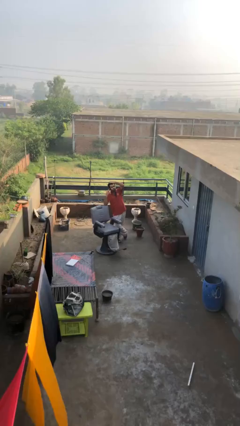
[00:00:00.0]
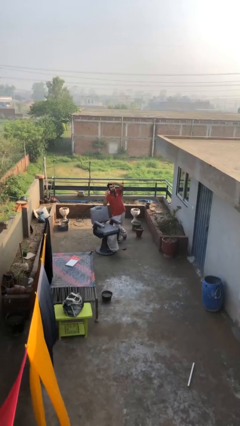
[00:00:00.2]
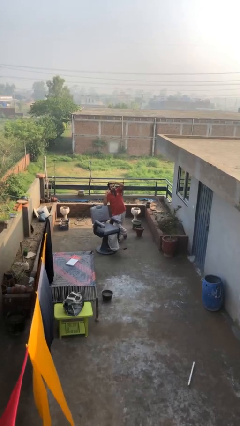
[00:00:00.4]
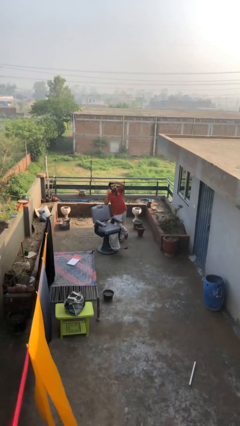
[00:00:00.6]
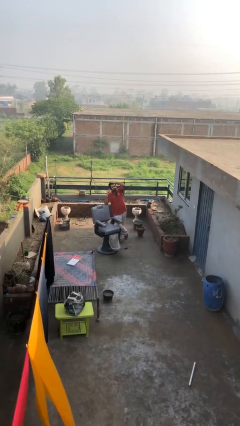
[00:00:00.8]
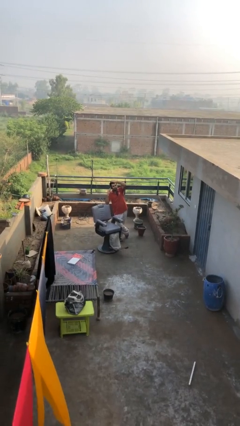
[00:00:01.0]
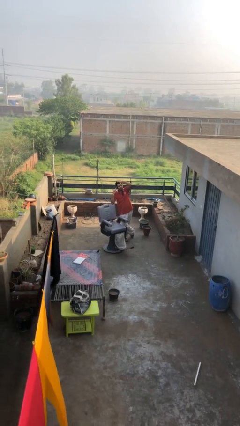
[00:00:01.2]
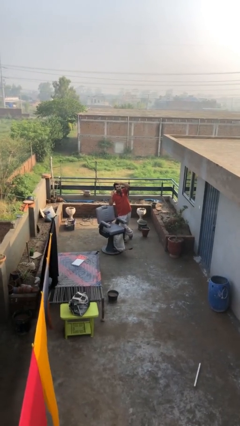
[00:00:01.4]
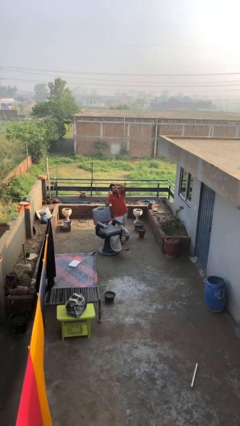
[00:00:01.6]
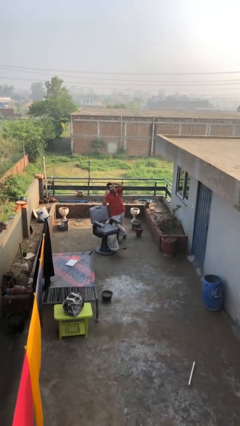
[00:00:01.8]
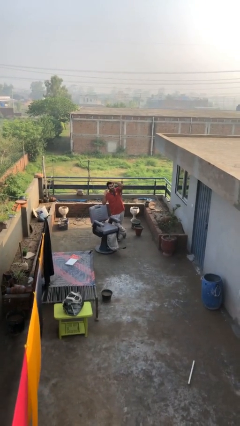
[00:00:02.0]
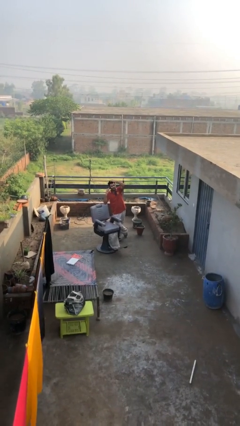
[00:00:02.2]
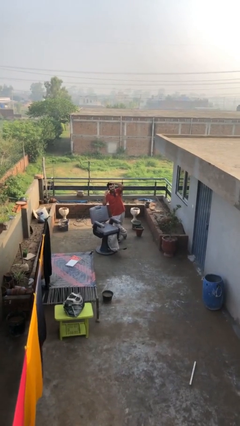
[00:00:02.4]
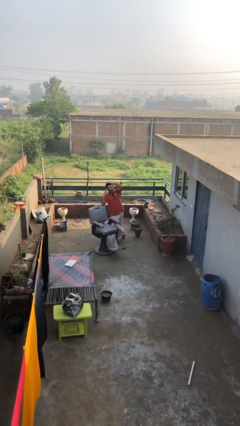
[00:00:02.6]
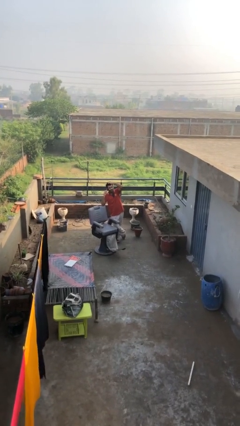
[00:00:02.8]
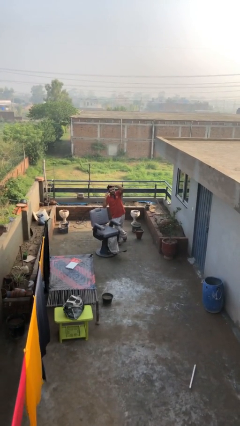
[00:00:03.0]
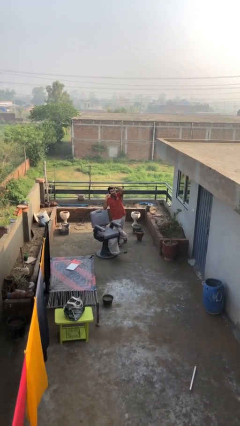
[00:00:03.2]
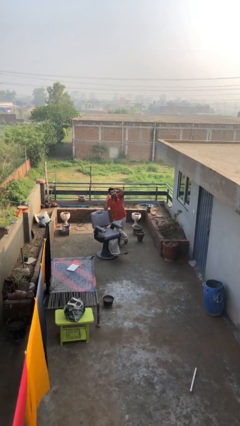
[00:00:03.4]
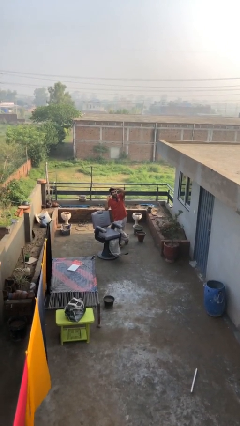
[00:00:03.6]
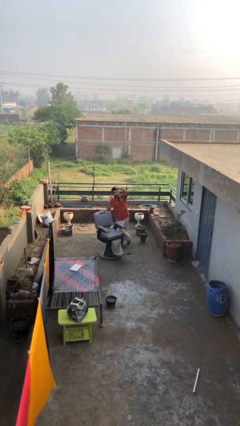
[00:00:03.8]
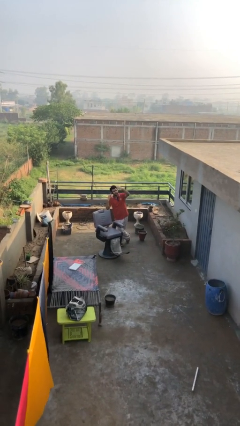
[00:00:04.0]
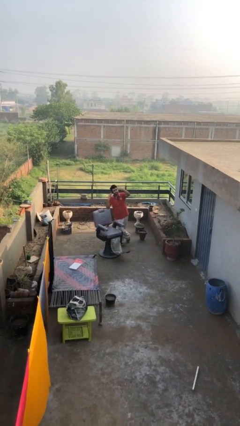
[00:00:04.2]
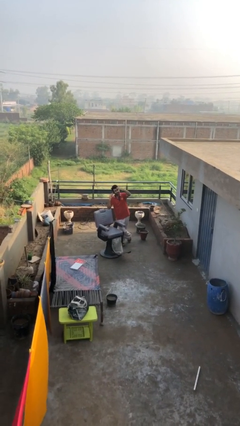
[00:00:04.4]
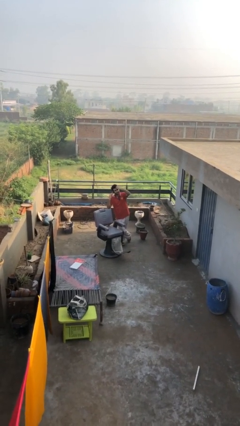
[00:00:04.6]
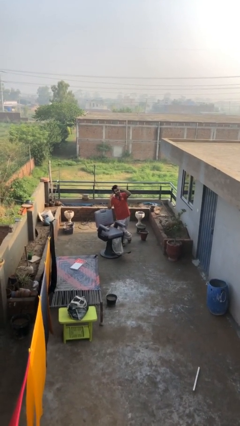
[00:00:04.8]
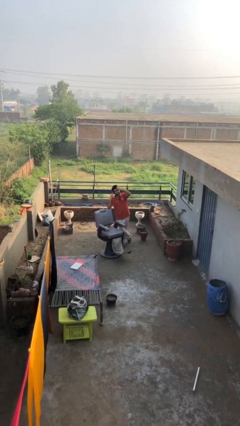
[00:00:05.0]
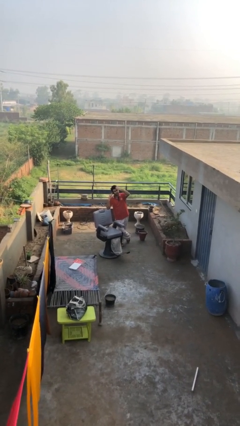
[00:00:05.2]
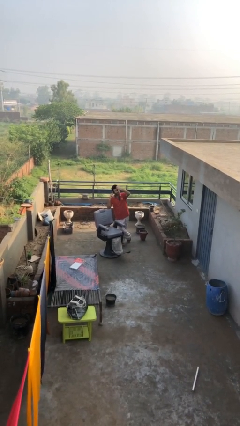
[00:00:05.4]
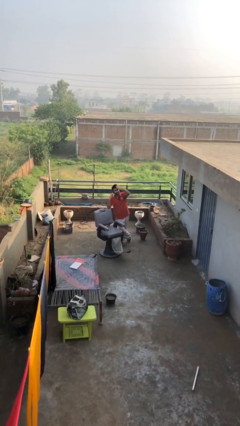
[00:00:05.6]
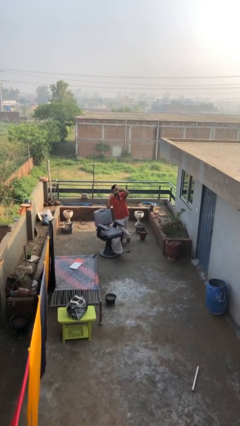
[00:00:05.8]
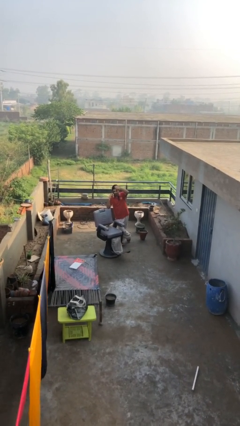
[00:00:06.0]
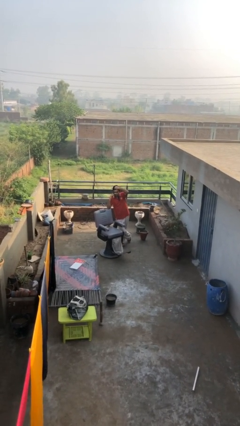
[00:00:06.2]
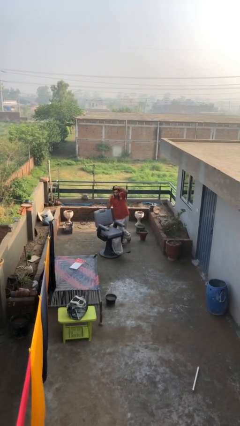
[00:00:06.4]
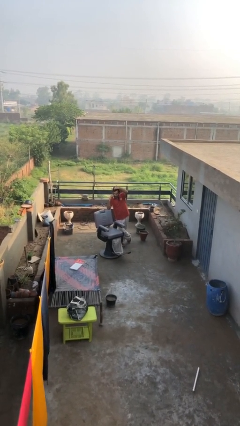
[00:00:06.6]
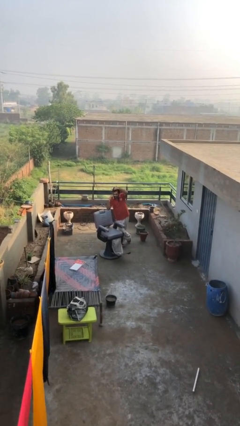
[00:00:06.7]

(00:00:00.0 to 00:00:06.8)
person talks on phone

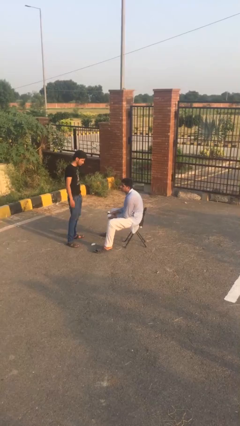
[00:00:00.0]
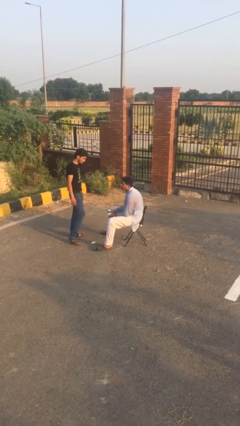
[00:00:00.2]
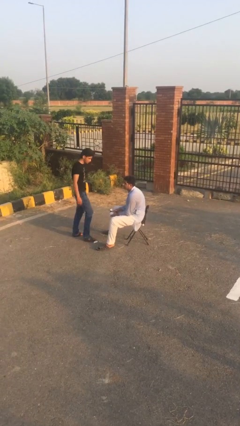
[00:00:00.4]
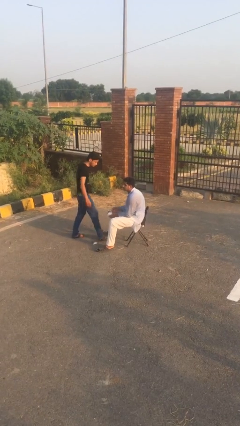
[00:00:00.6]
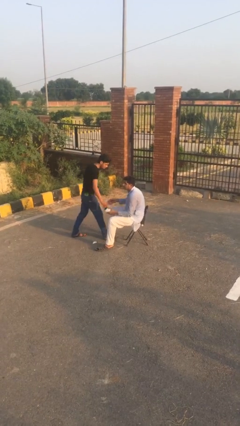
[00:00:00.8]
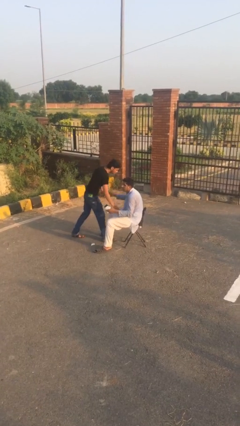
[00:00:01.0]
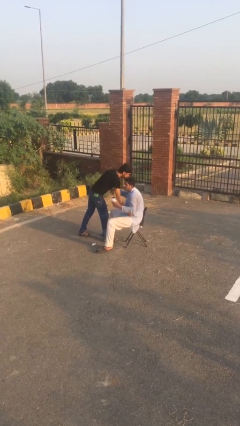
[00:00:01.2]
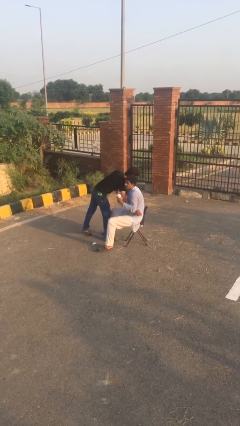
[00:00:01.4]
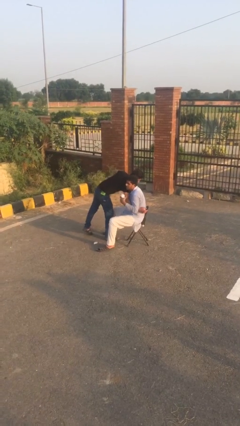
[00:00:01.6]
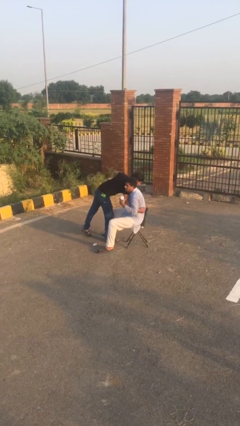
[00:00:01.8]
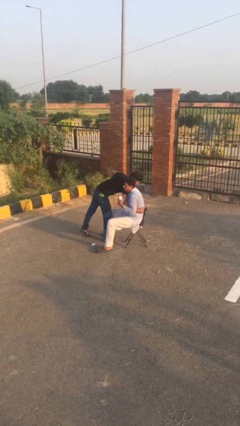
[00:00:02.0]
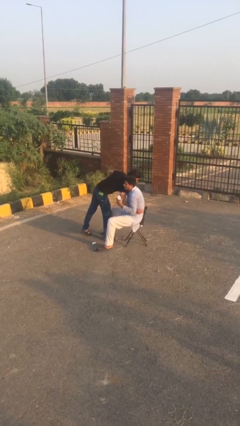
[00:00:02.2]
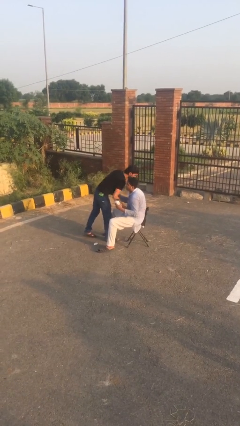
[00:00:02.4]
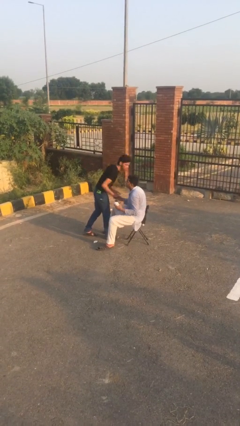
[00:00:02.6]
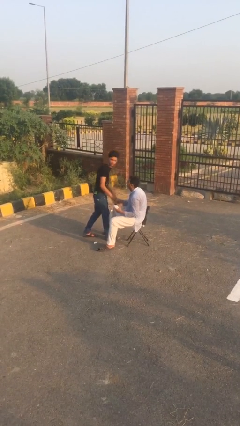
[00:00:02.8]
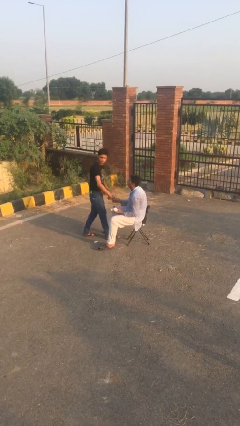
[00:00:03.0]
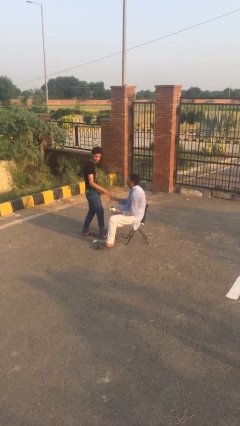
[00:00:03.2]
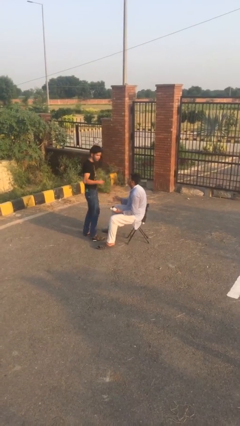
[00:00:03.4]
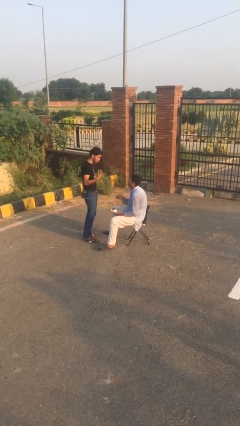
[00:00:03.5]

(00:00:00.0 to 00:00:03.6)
person embraces person

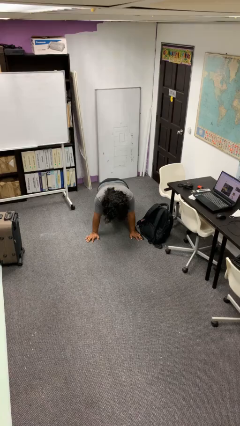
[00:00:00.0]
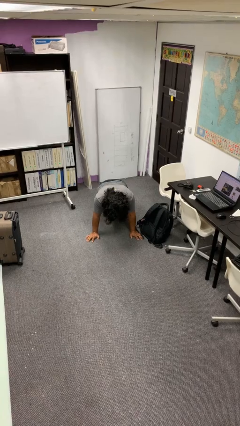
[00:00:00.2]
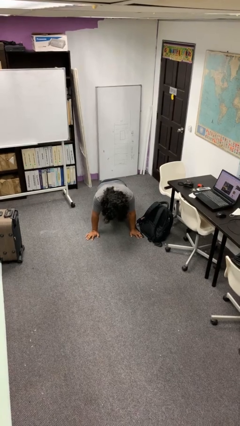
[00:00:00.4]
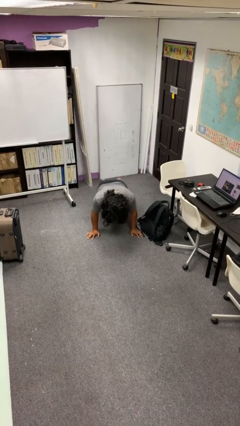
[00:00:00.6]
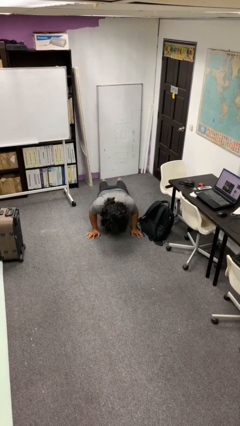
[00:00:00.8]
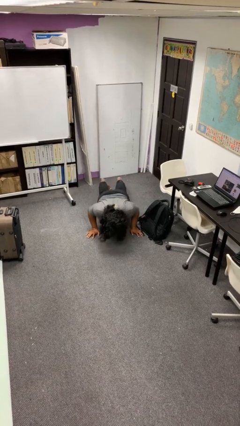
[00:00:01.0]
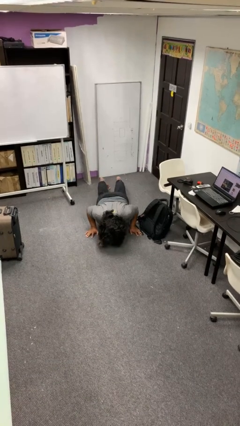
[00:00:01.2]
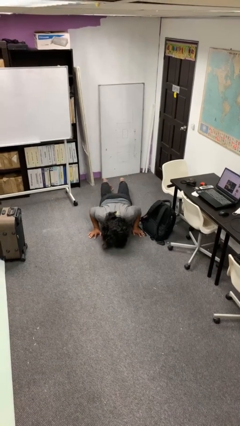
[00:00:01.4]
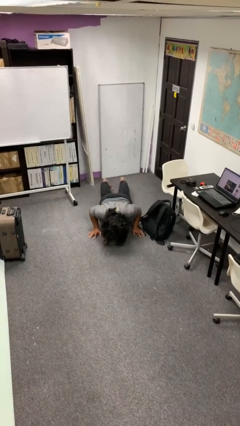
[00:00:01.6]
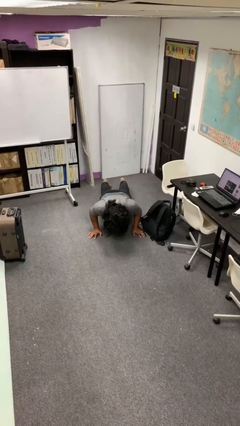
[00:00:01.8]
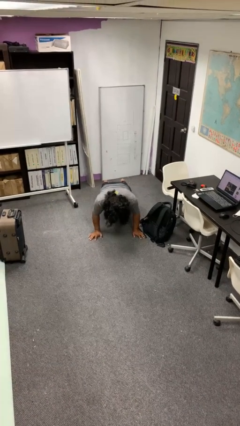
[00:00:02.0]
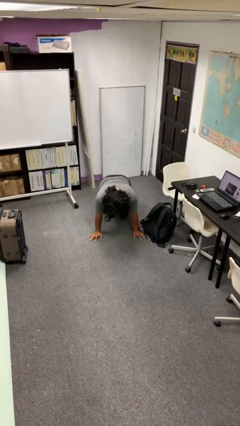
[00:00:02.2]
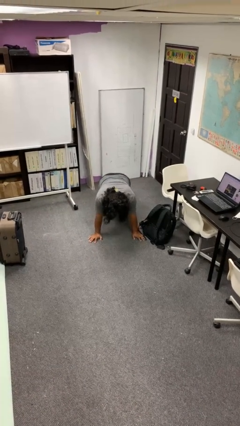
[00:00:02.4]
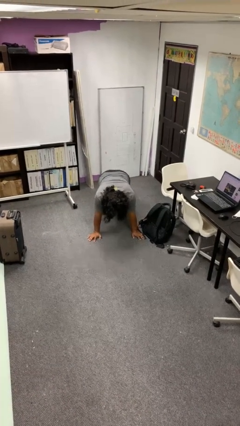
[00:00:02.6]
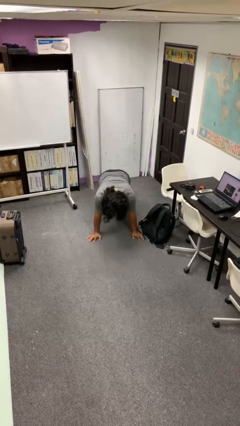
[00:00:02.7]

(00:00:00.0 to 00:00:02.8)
person exercises with pushup

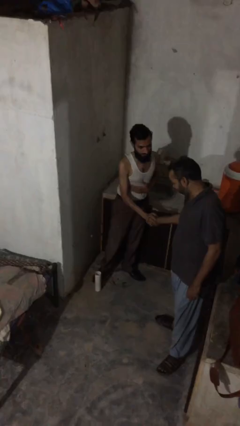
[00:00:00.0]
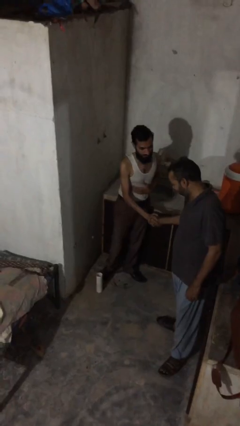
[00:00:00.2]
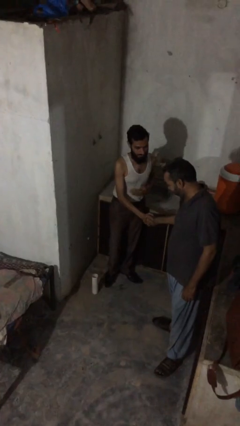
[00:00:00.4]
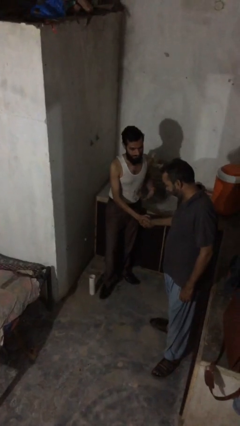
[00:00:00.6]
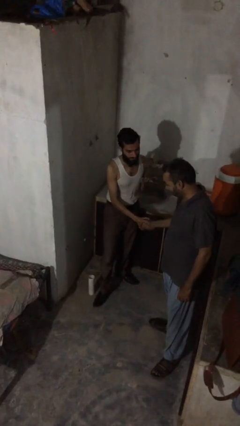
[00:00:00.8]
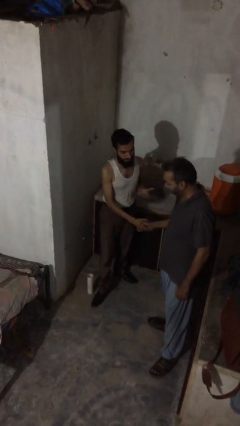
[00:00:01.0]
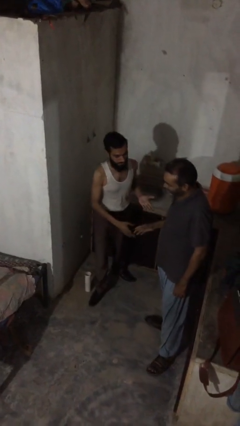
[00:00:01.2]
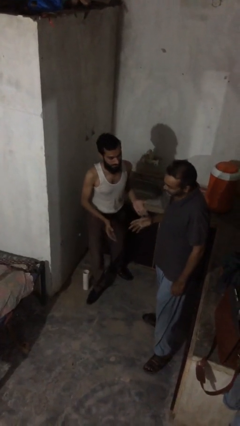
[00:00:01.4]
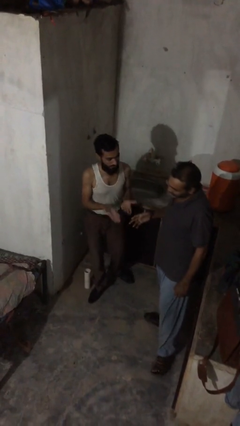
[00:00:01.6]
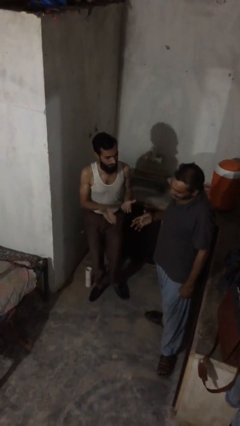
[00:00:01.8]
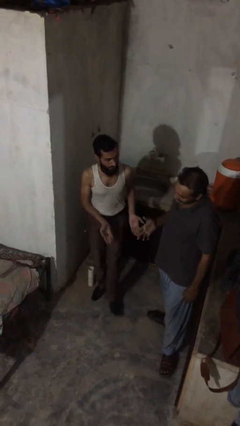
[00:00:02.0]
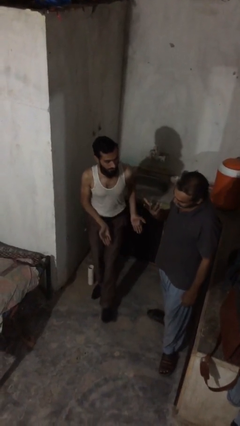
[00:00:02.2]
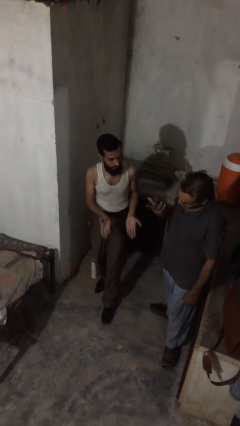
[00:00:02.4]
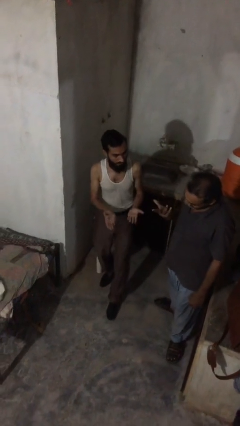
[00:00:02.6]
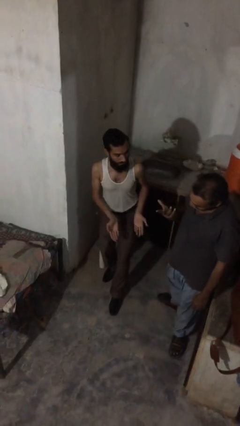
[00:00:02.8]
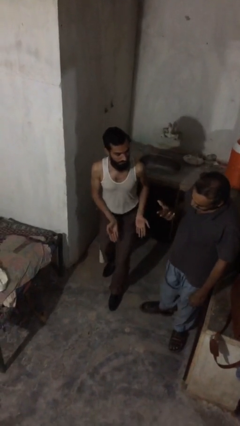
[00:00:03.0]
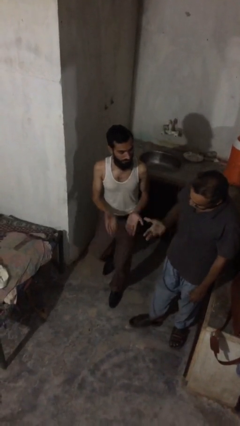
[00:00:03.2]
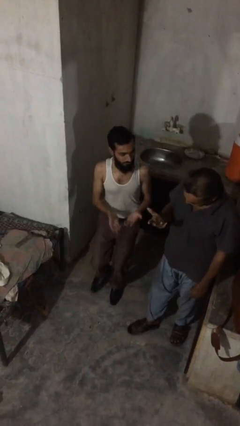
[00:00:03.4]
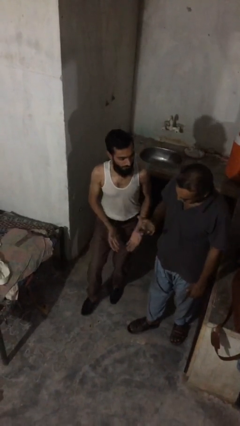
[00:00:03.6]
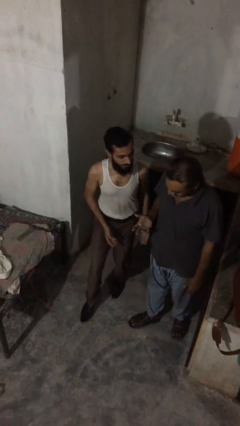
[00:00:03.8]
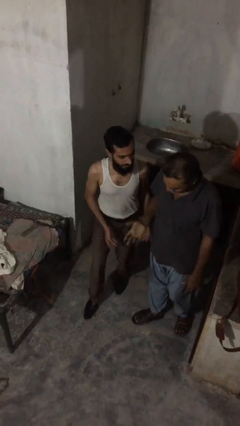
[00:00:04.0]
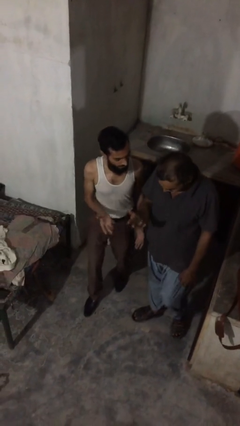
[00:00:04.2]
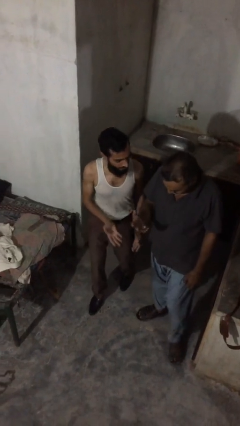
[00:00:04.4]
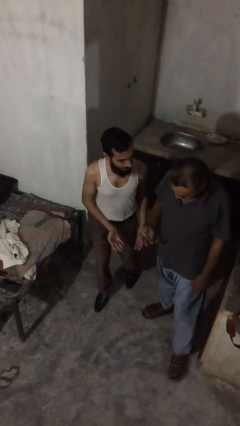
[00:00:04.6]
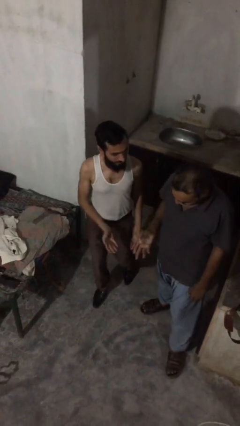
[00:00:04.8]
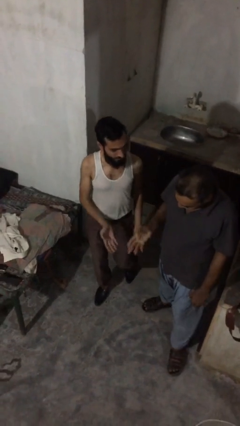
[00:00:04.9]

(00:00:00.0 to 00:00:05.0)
person talks to person
